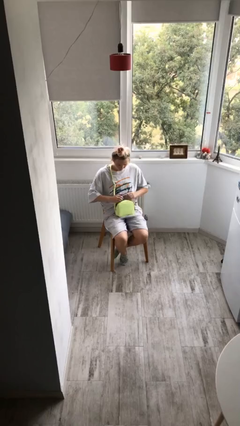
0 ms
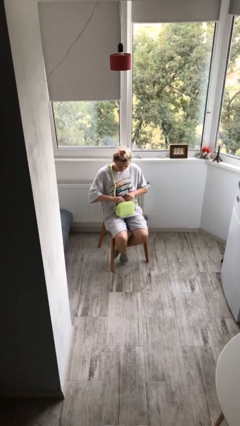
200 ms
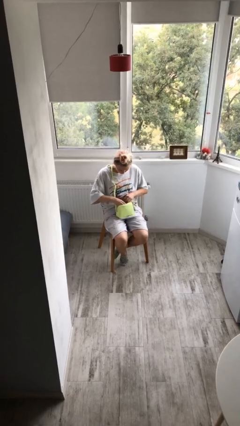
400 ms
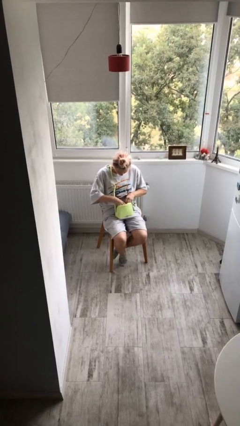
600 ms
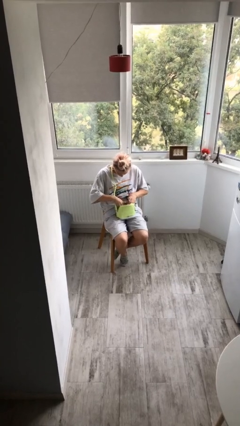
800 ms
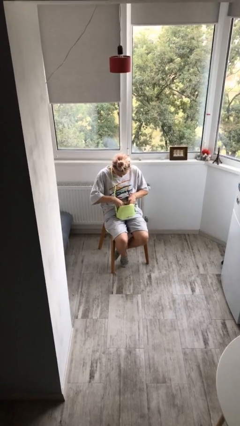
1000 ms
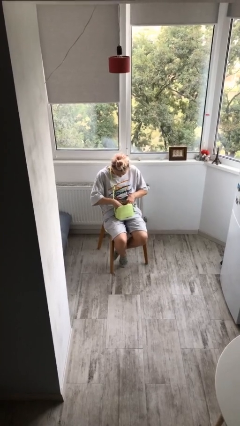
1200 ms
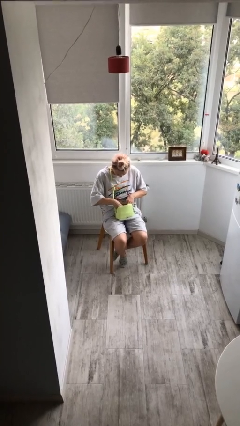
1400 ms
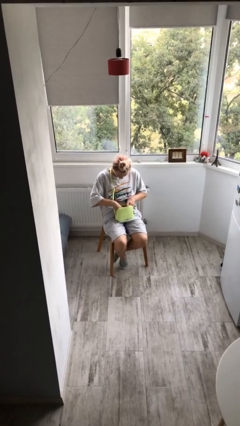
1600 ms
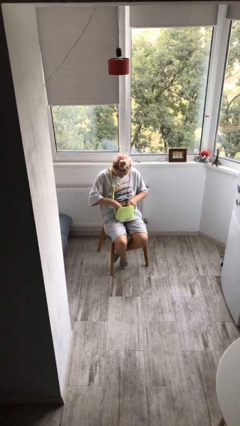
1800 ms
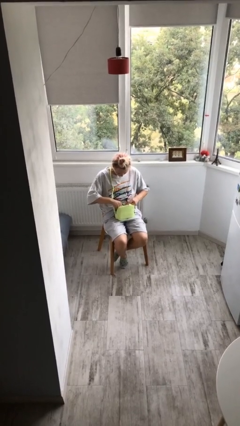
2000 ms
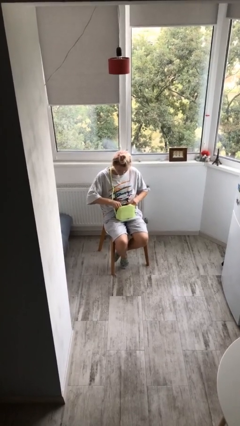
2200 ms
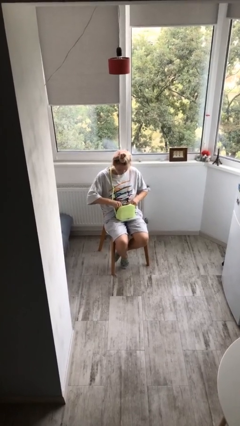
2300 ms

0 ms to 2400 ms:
person searches in purse

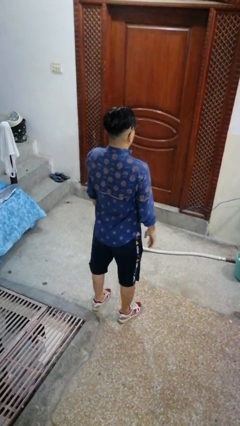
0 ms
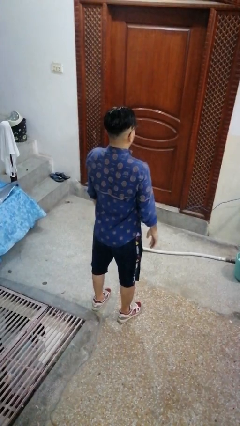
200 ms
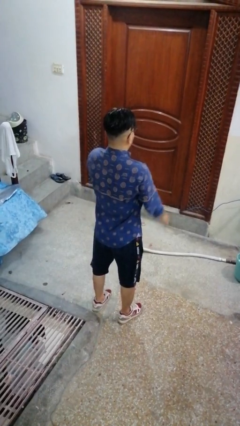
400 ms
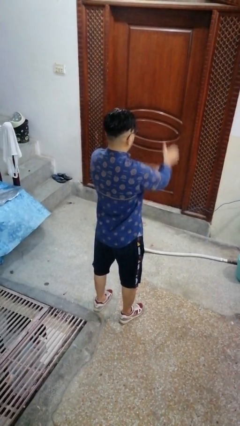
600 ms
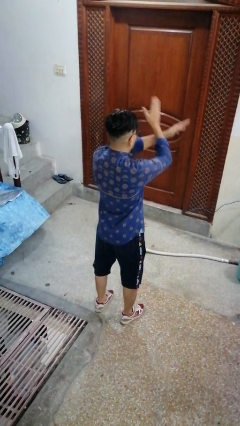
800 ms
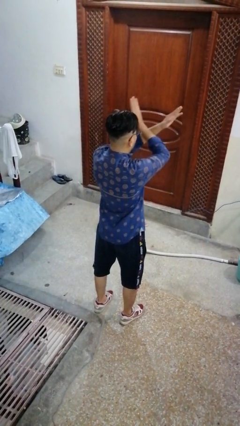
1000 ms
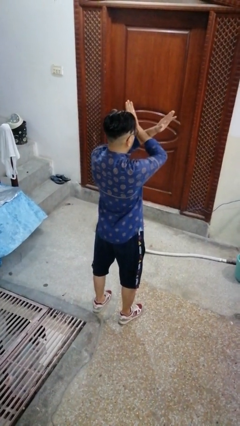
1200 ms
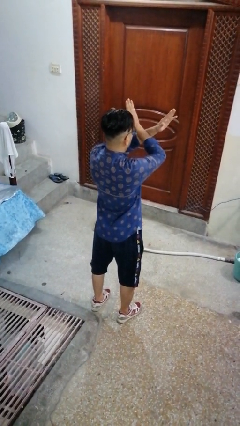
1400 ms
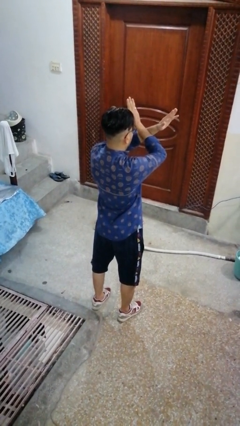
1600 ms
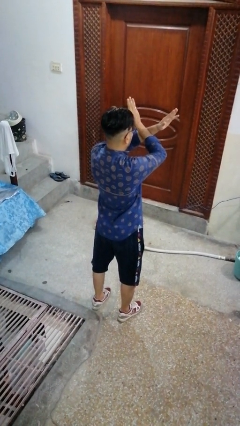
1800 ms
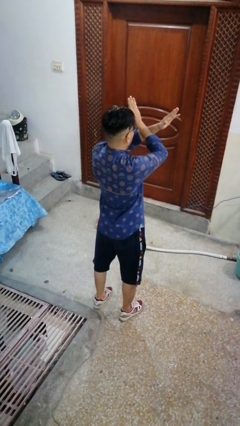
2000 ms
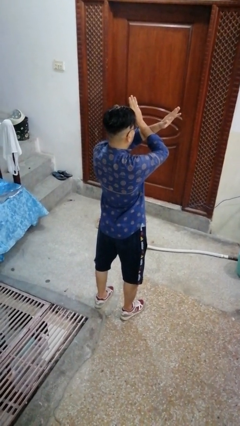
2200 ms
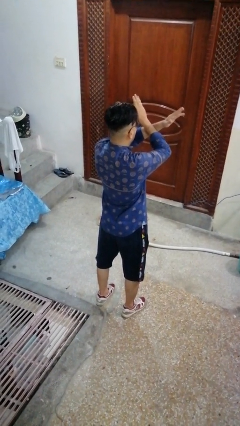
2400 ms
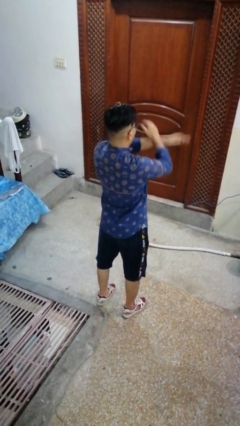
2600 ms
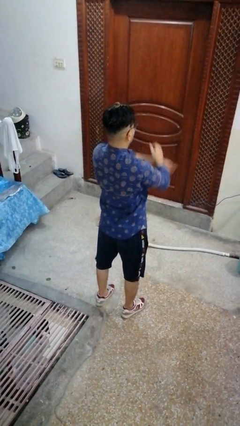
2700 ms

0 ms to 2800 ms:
person gestures arms x

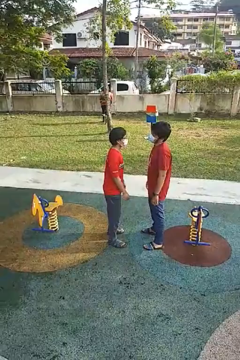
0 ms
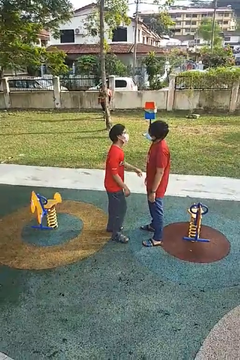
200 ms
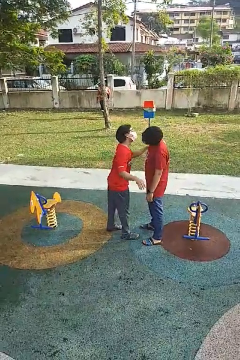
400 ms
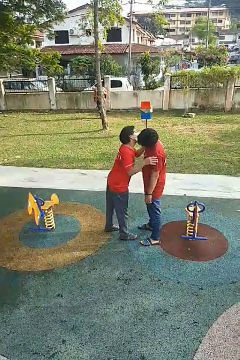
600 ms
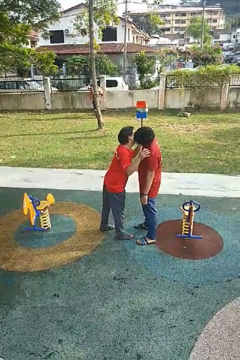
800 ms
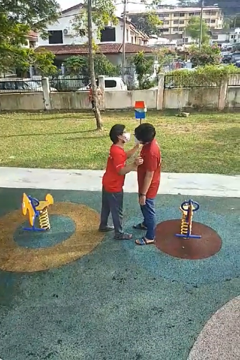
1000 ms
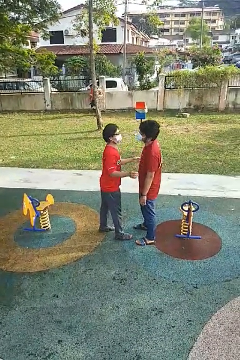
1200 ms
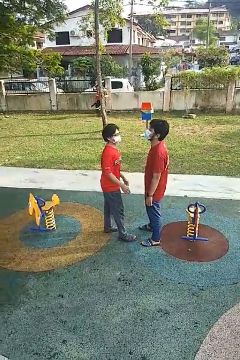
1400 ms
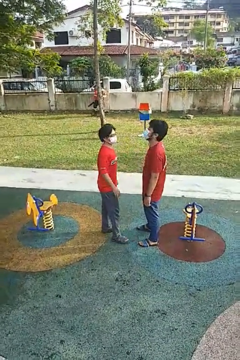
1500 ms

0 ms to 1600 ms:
person kisses cheek of person

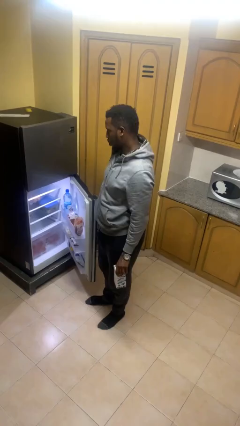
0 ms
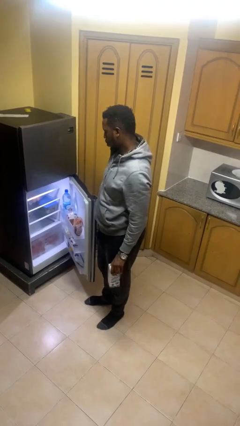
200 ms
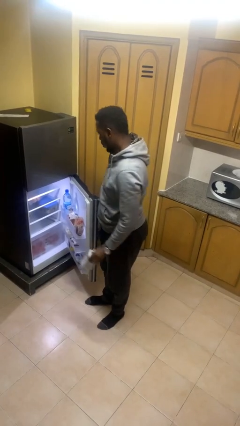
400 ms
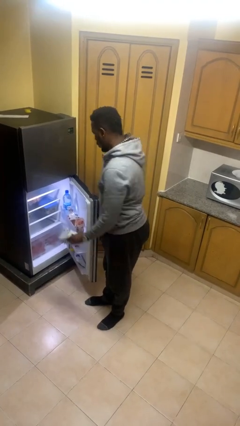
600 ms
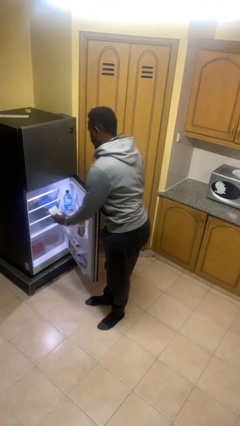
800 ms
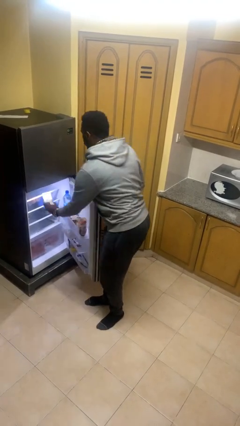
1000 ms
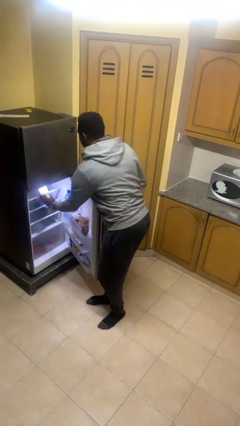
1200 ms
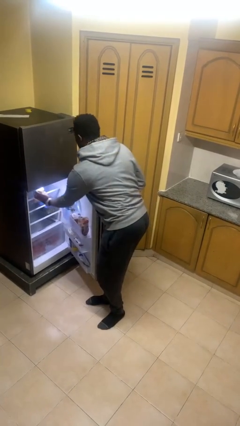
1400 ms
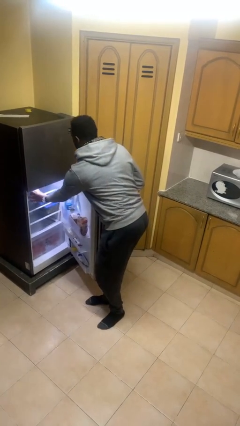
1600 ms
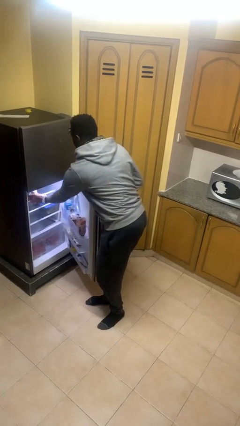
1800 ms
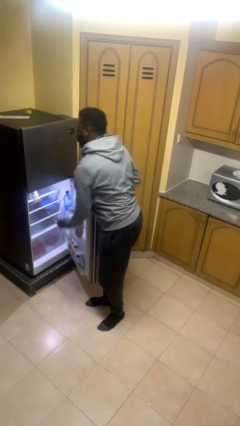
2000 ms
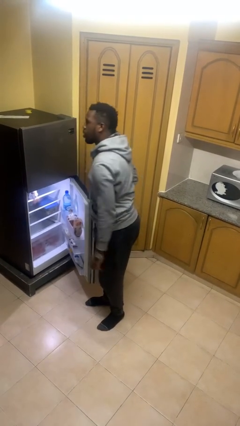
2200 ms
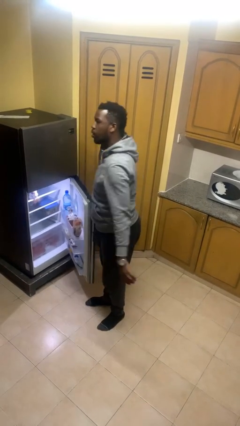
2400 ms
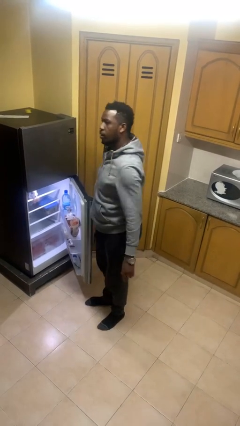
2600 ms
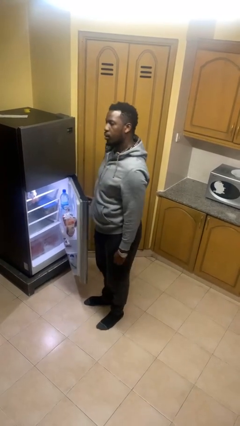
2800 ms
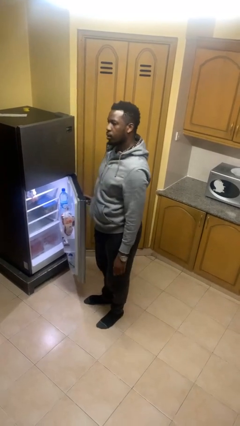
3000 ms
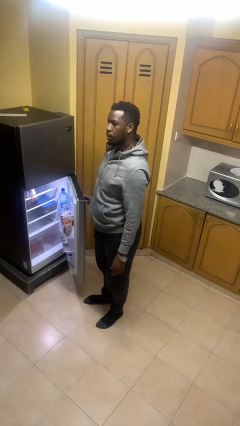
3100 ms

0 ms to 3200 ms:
person puts object into refrigerator

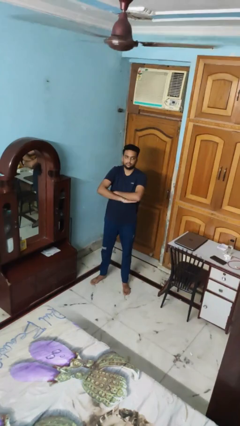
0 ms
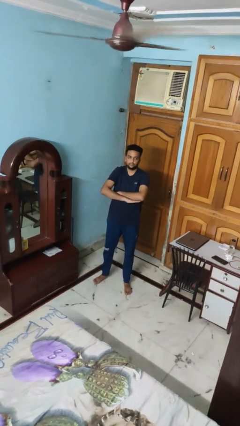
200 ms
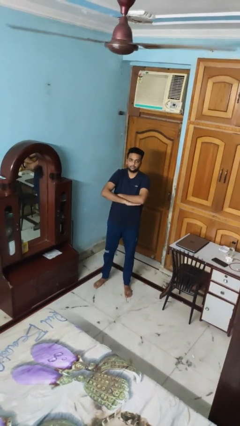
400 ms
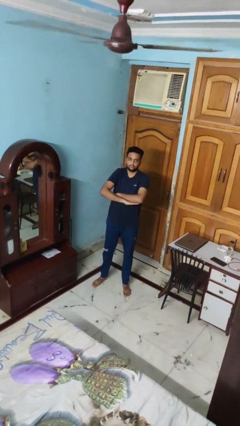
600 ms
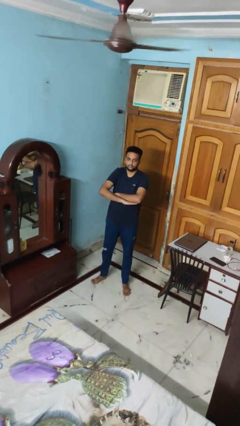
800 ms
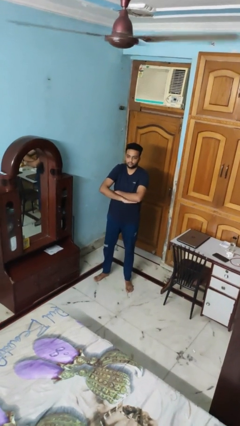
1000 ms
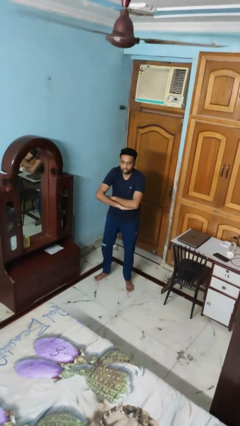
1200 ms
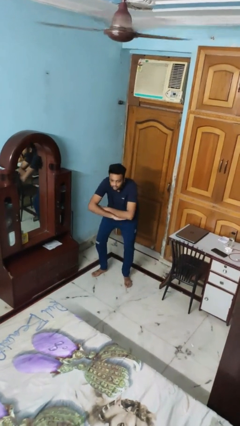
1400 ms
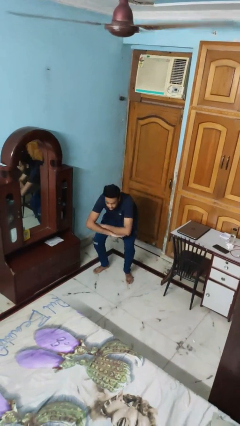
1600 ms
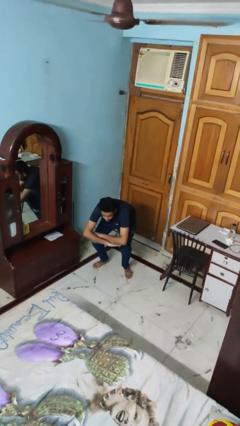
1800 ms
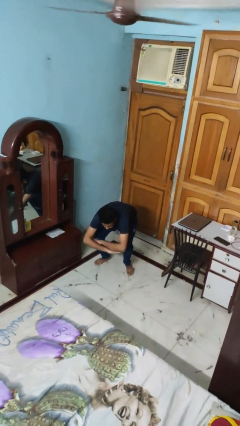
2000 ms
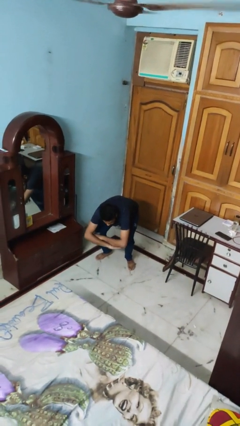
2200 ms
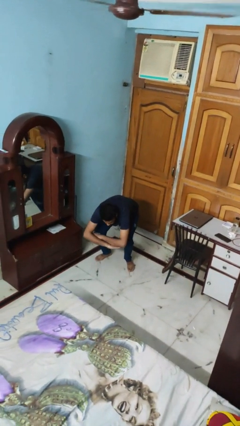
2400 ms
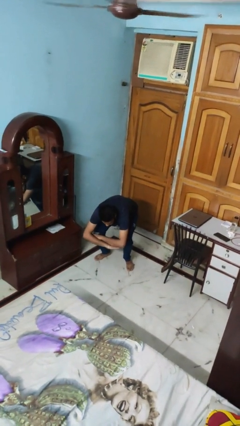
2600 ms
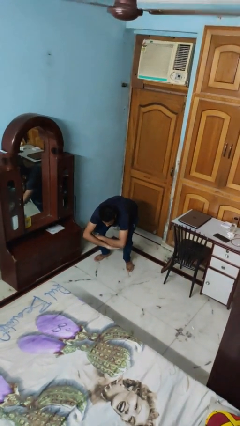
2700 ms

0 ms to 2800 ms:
person squats

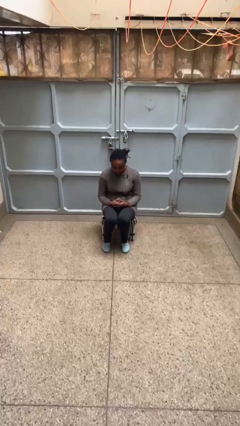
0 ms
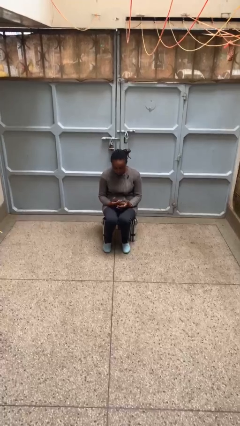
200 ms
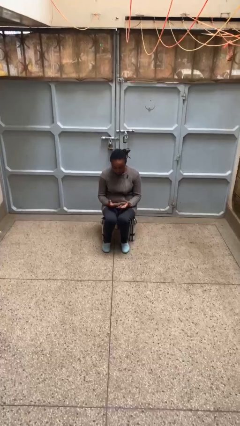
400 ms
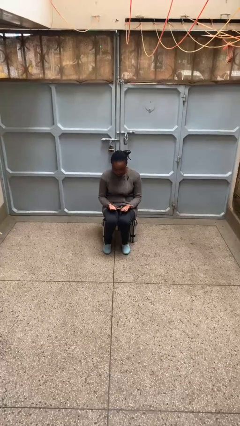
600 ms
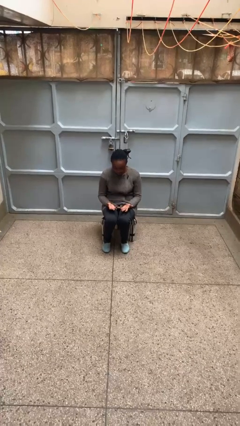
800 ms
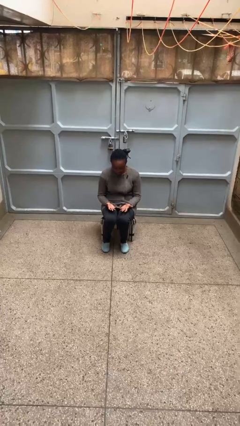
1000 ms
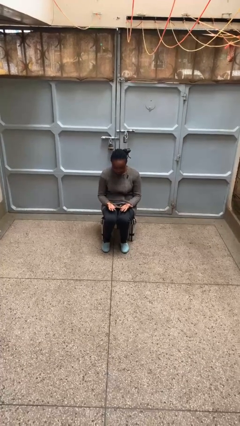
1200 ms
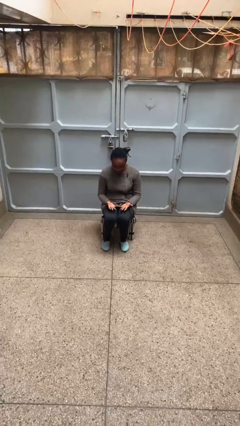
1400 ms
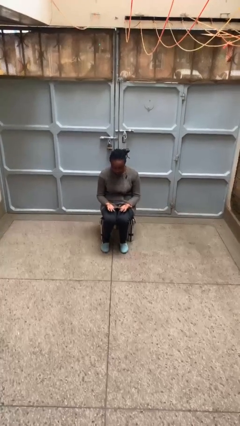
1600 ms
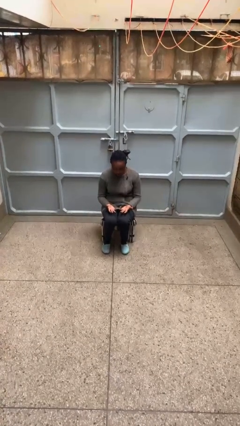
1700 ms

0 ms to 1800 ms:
person looks at hands in lap

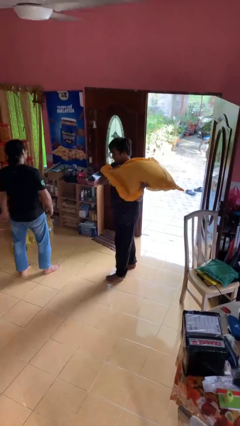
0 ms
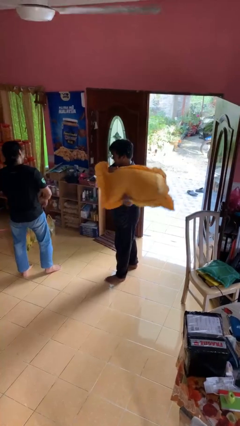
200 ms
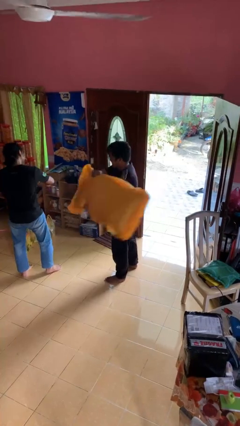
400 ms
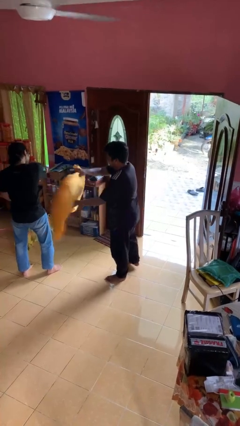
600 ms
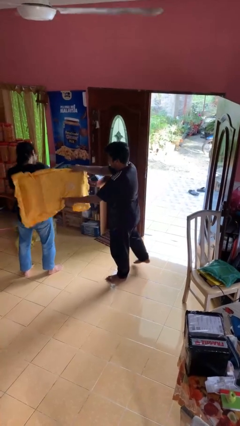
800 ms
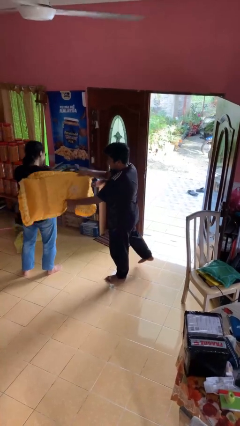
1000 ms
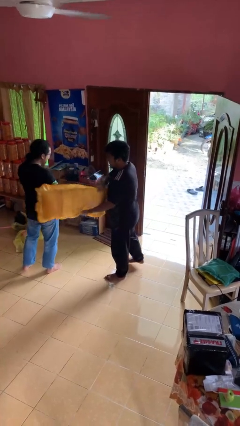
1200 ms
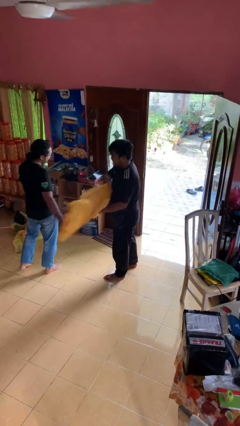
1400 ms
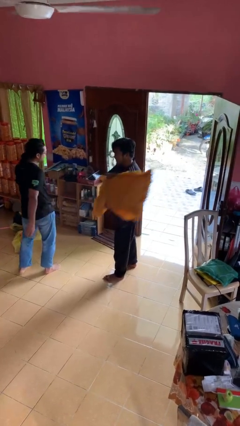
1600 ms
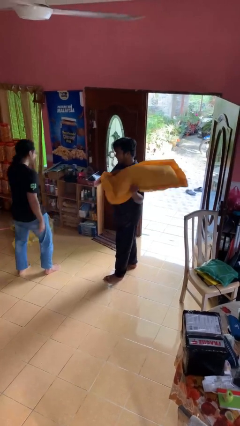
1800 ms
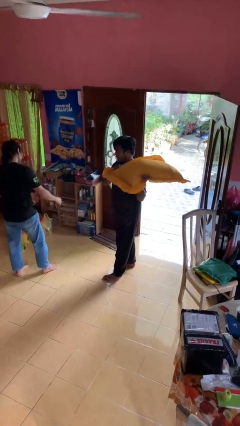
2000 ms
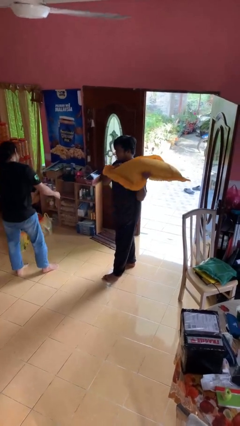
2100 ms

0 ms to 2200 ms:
person hits person with pillow

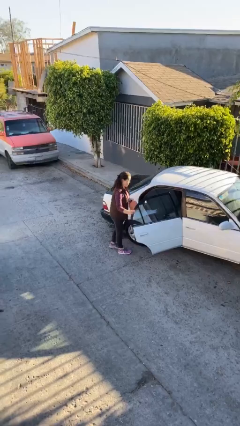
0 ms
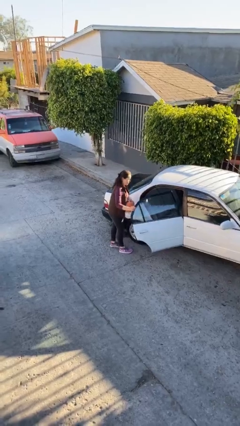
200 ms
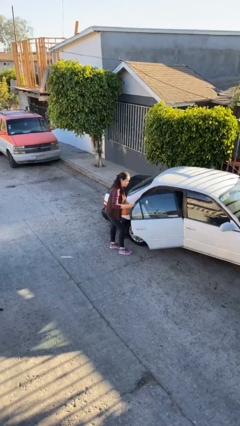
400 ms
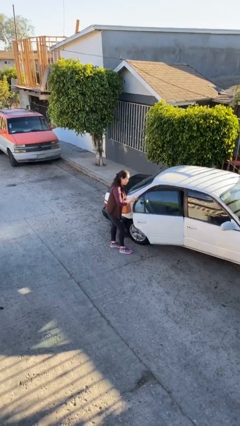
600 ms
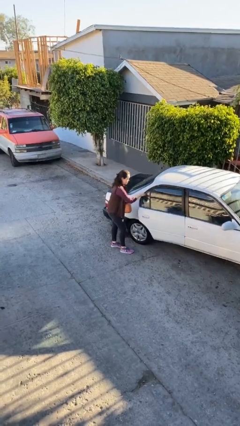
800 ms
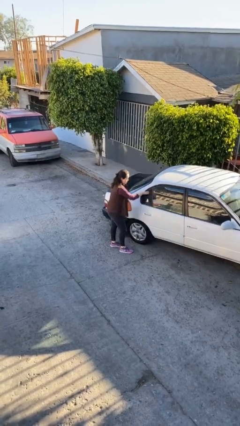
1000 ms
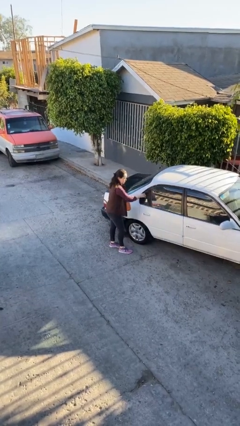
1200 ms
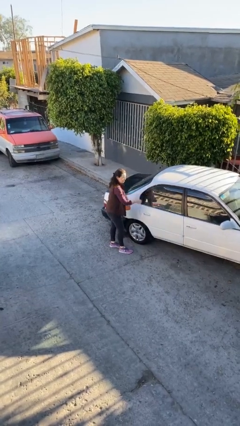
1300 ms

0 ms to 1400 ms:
person closes car door
